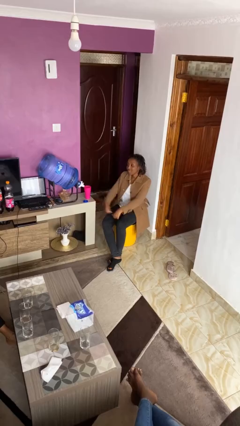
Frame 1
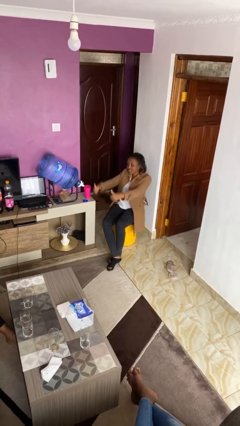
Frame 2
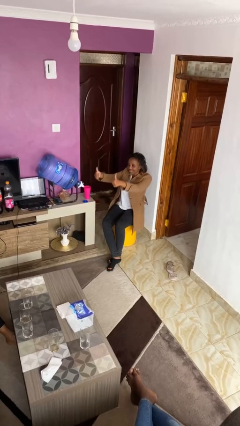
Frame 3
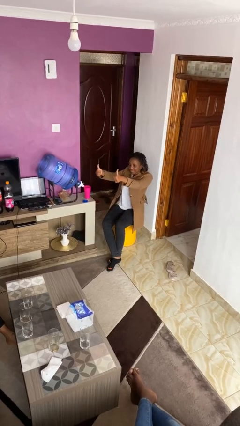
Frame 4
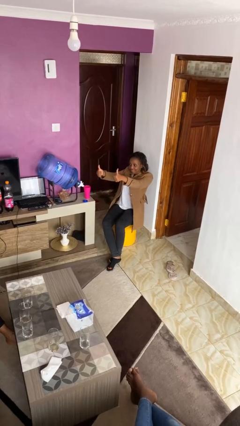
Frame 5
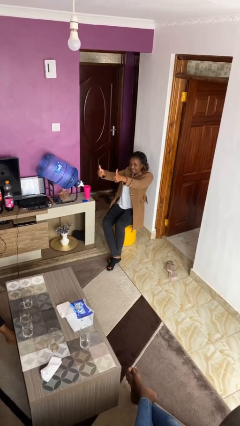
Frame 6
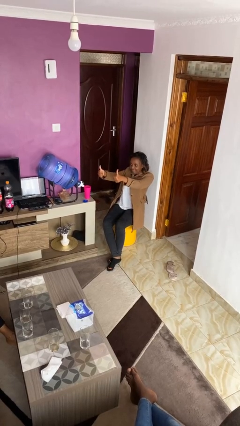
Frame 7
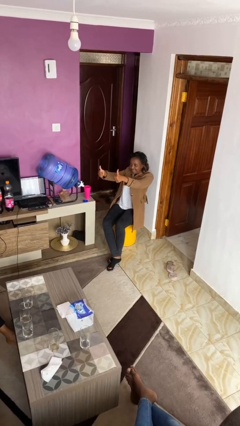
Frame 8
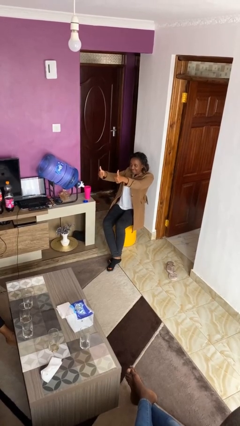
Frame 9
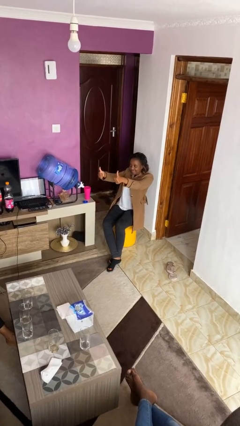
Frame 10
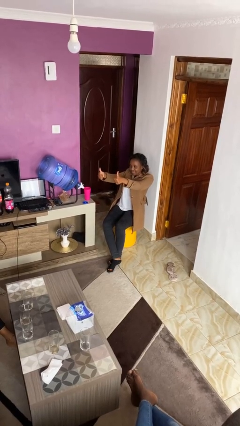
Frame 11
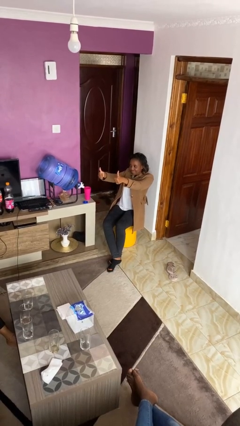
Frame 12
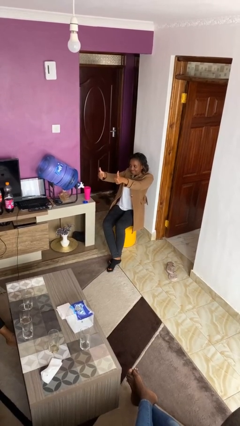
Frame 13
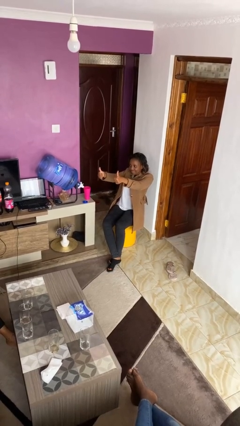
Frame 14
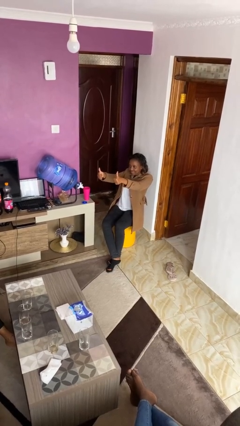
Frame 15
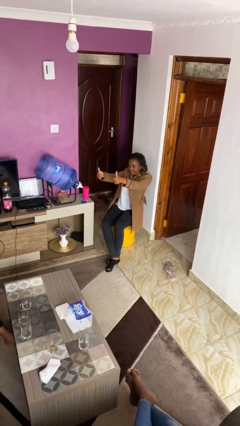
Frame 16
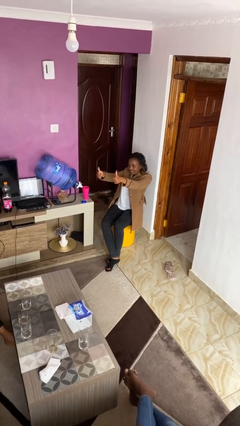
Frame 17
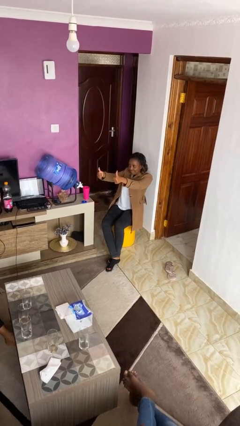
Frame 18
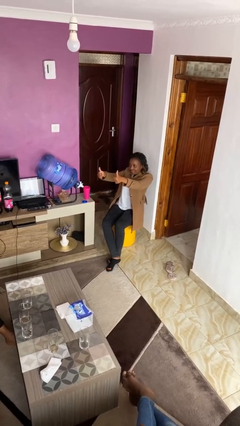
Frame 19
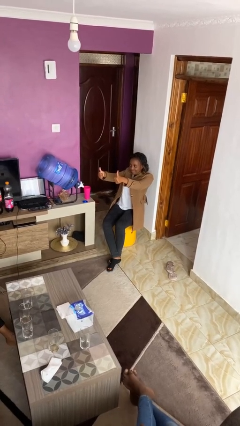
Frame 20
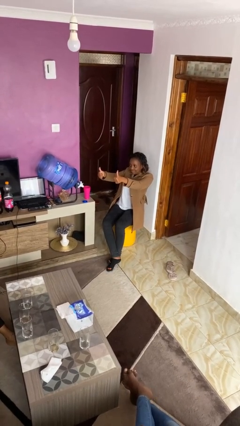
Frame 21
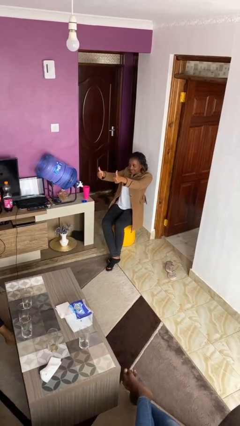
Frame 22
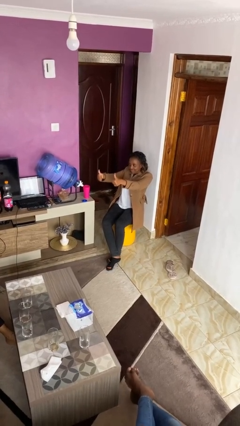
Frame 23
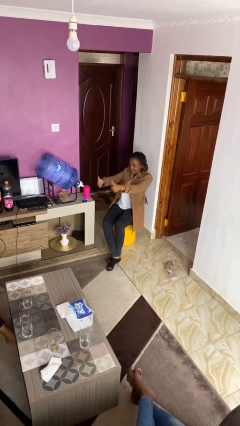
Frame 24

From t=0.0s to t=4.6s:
person gestures thumbs up

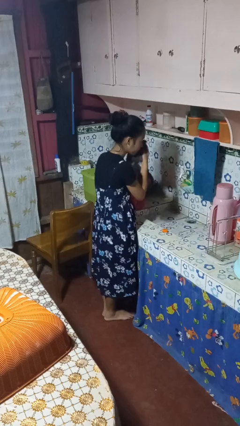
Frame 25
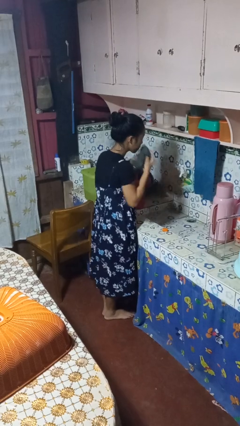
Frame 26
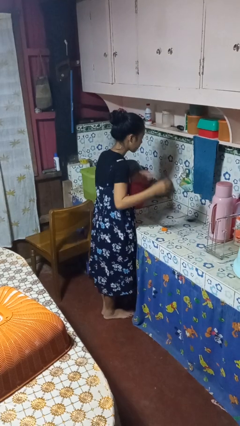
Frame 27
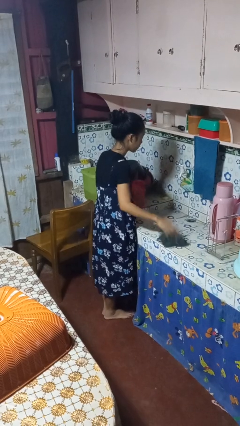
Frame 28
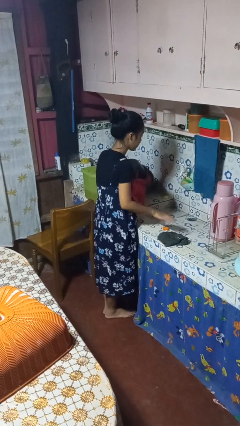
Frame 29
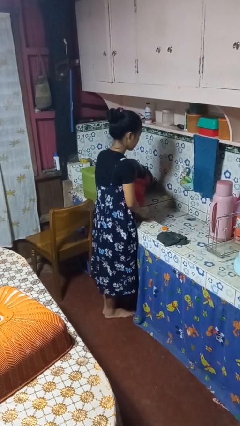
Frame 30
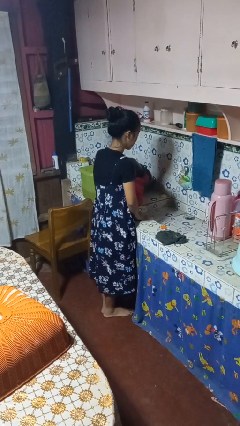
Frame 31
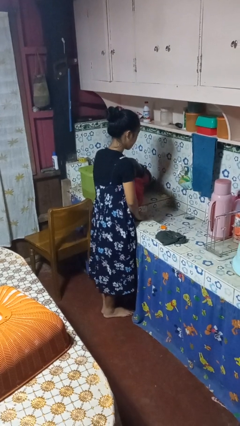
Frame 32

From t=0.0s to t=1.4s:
person dries face with towel

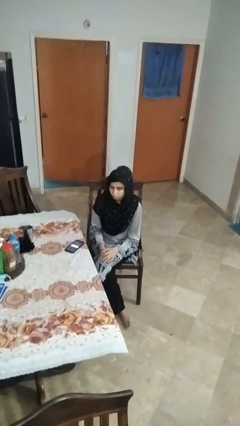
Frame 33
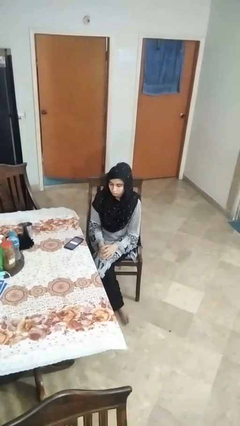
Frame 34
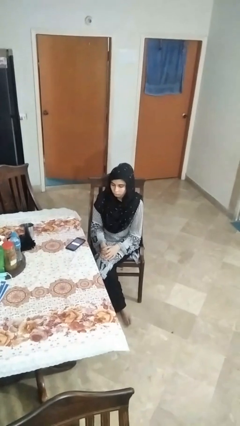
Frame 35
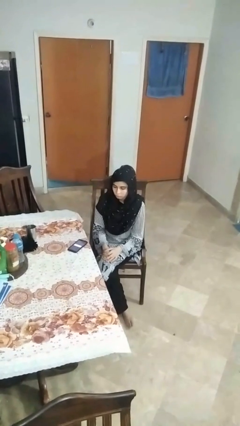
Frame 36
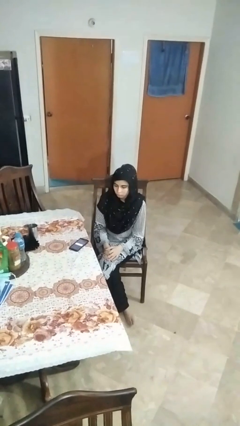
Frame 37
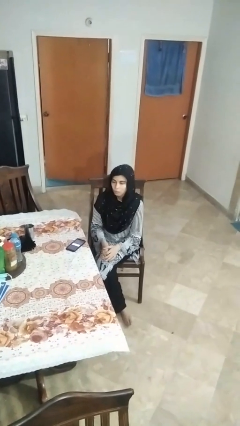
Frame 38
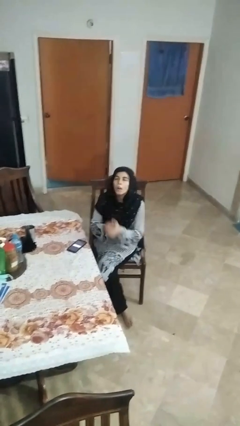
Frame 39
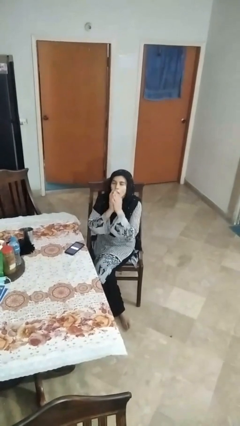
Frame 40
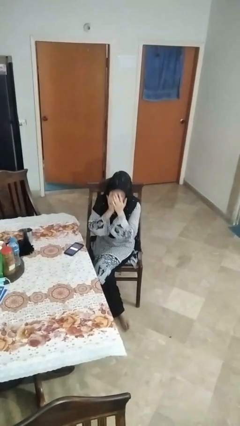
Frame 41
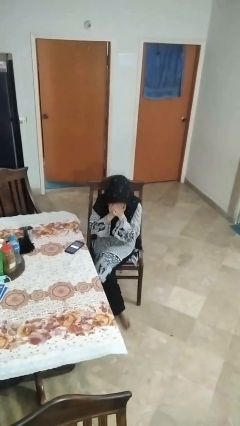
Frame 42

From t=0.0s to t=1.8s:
person sneezes into hand

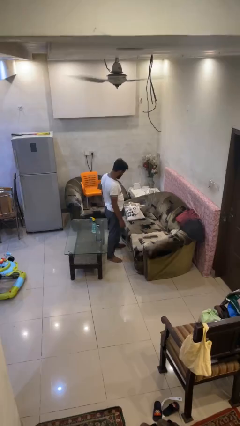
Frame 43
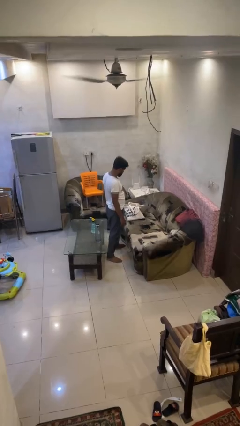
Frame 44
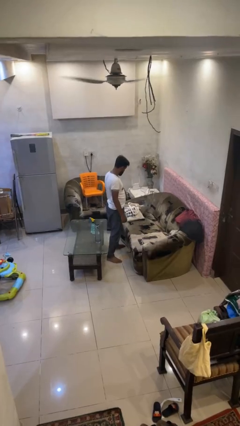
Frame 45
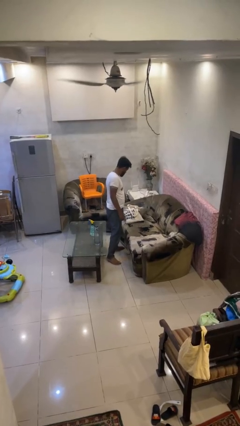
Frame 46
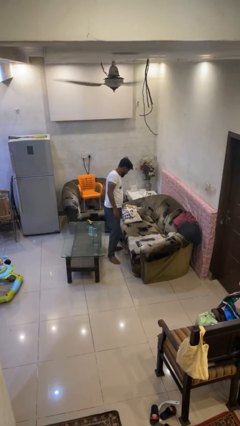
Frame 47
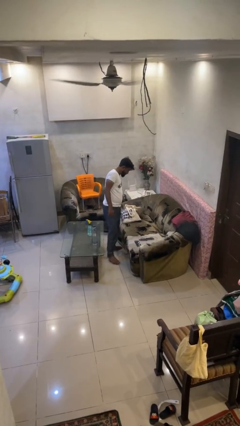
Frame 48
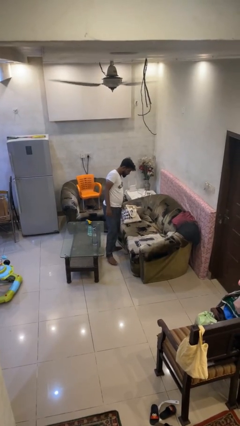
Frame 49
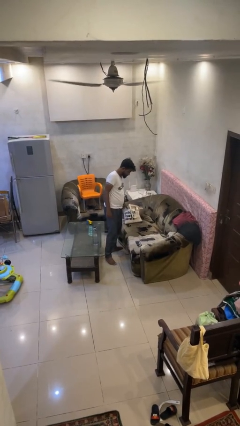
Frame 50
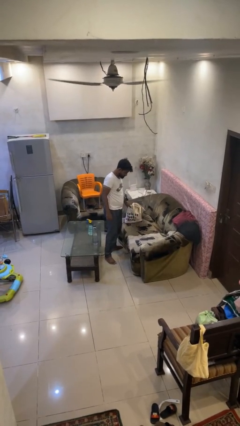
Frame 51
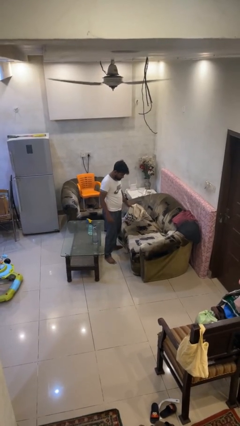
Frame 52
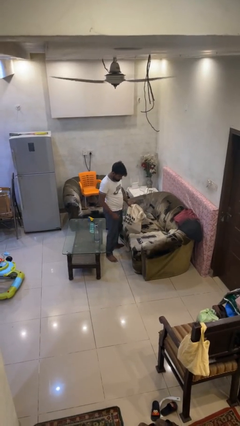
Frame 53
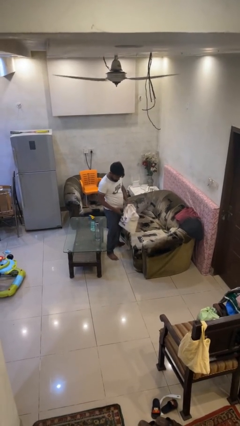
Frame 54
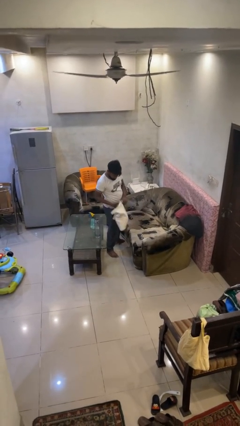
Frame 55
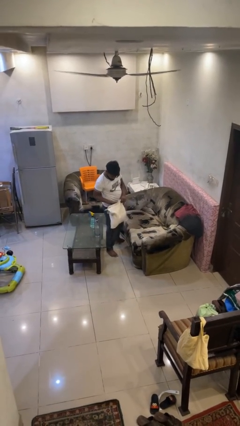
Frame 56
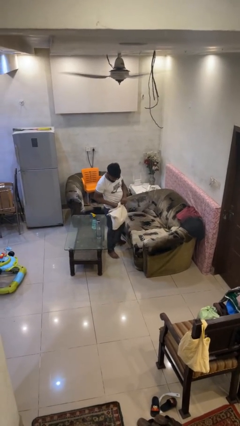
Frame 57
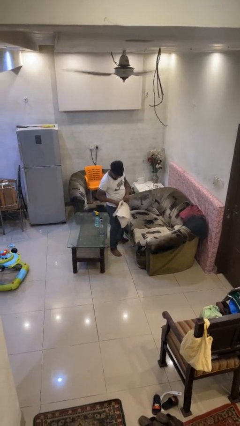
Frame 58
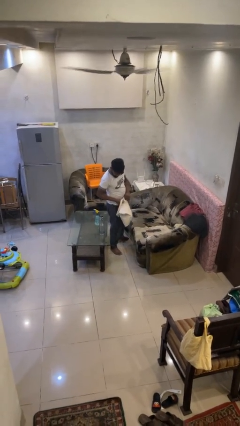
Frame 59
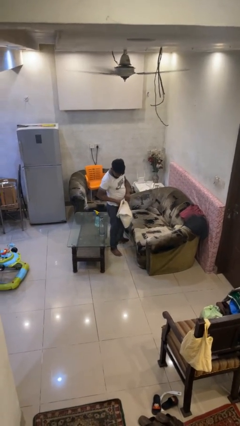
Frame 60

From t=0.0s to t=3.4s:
person picks up object from couch

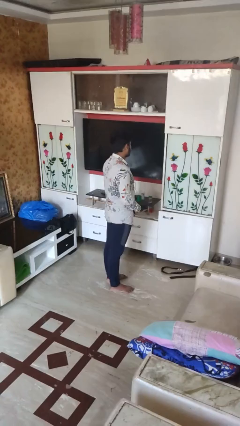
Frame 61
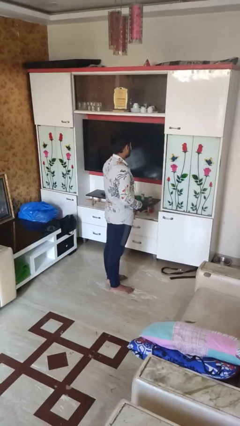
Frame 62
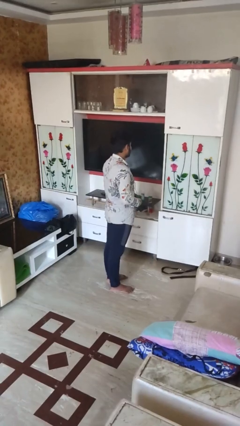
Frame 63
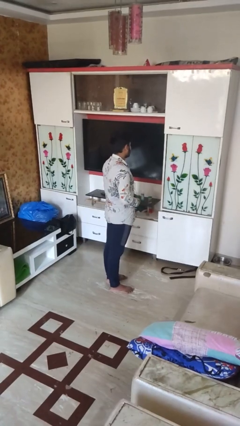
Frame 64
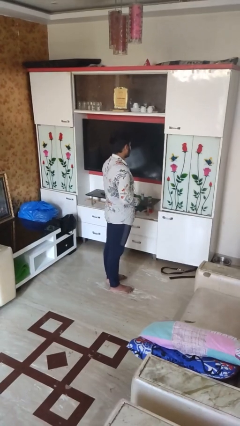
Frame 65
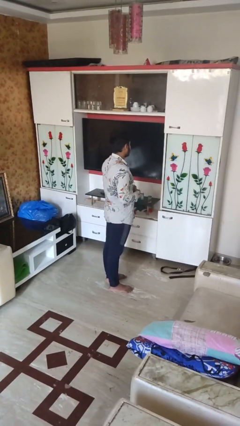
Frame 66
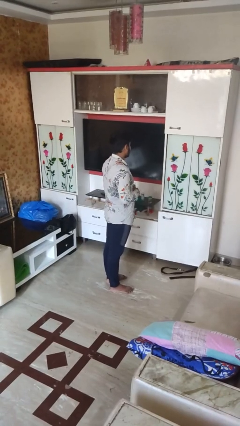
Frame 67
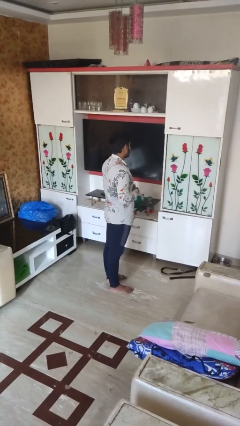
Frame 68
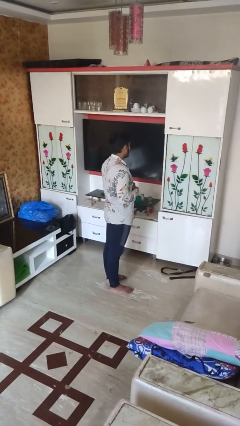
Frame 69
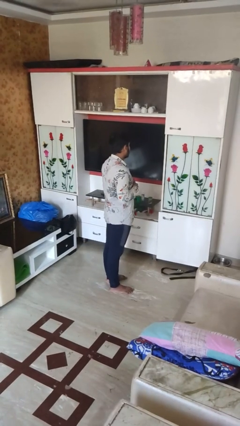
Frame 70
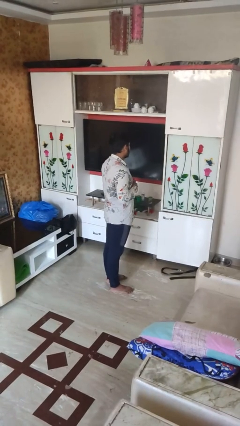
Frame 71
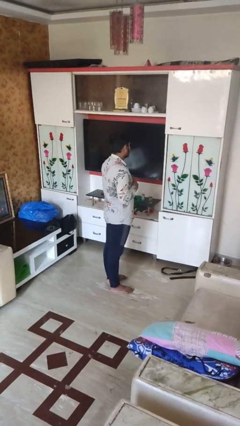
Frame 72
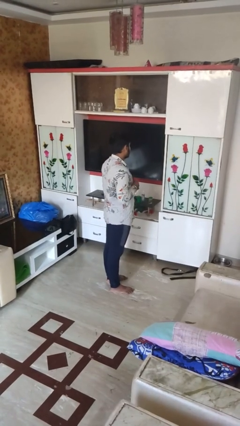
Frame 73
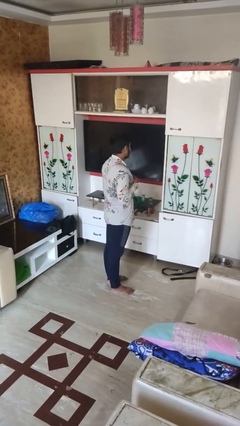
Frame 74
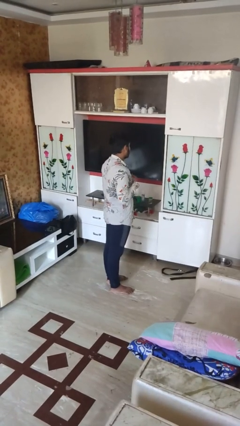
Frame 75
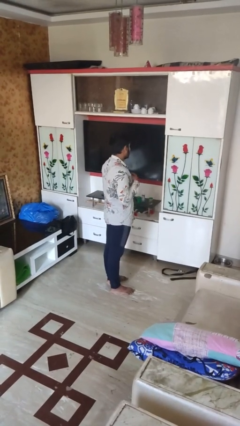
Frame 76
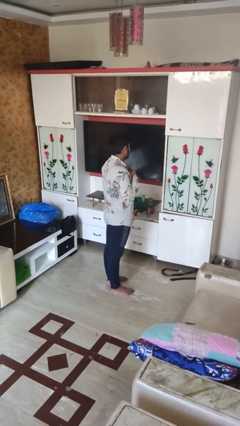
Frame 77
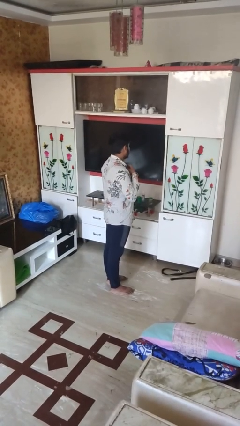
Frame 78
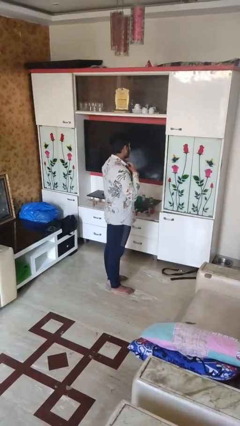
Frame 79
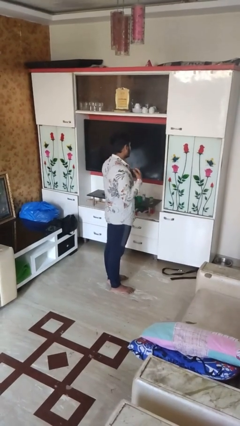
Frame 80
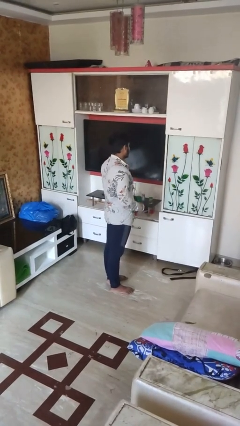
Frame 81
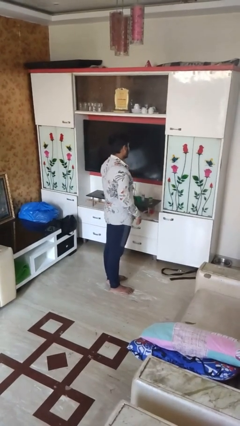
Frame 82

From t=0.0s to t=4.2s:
person unbuttons shirt

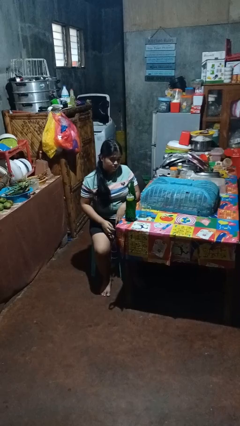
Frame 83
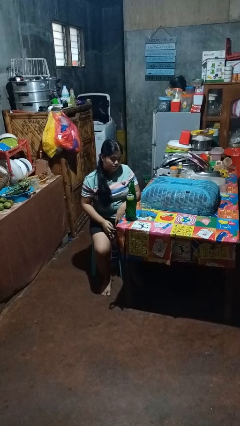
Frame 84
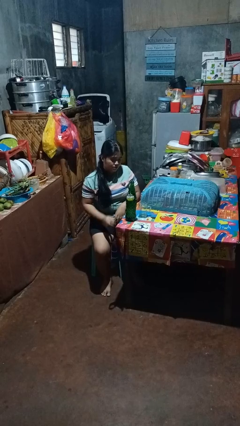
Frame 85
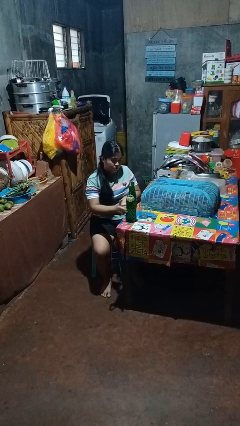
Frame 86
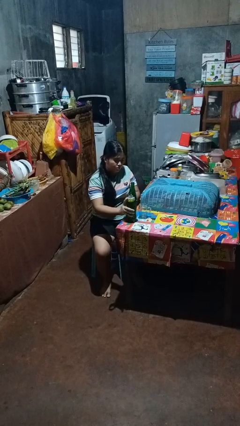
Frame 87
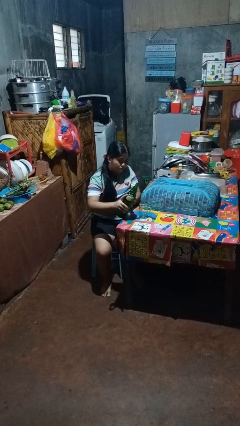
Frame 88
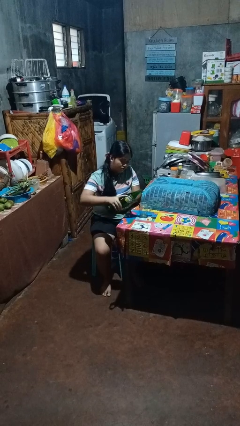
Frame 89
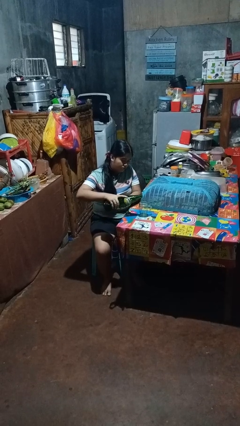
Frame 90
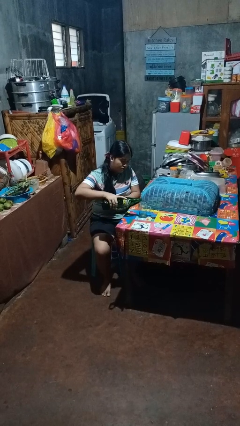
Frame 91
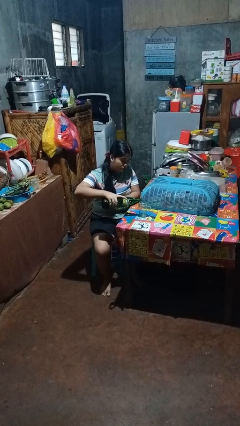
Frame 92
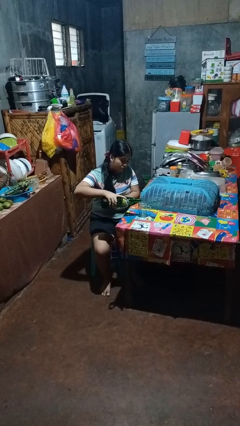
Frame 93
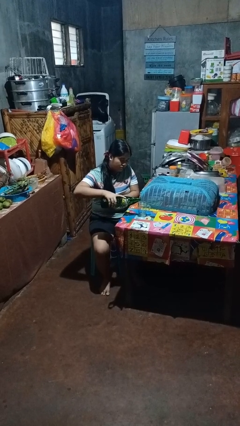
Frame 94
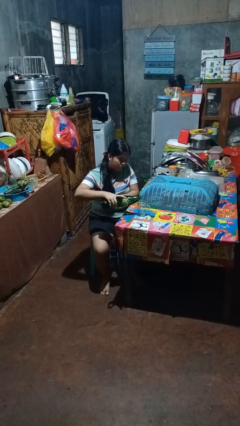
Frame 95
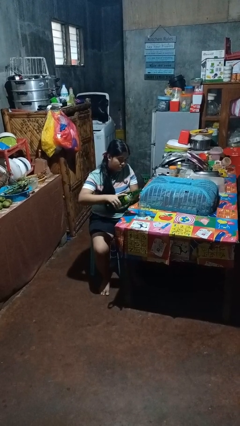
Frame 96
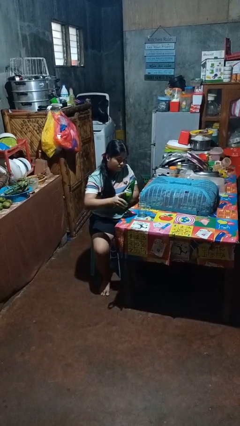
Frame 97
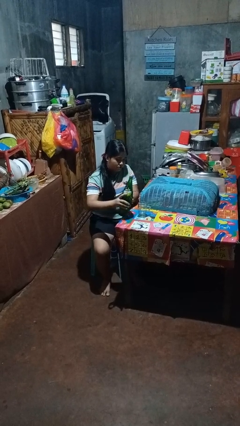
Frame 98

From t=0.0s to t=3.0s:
person pours liquid into cup
